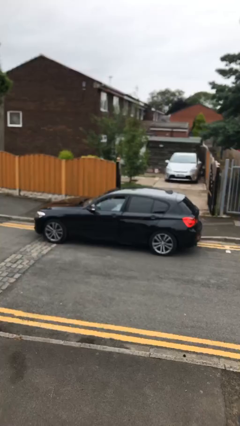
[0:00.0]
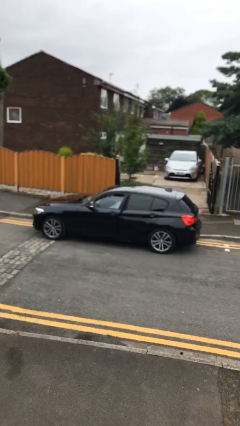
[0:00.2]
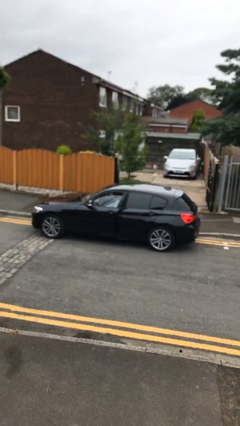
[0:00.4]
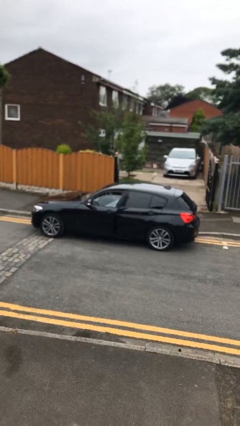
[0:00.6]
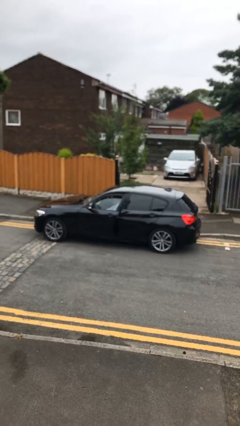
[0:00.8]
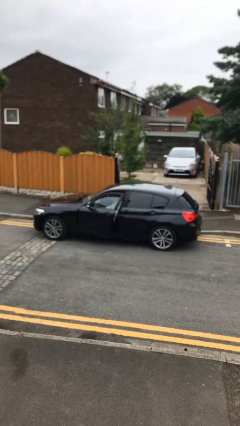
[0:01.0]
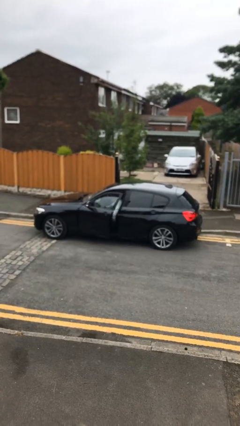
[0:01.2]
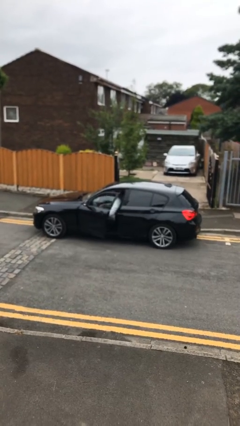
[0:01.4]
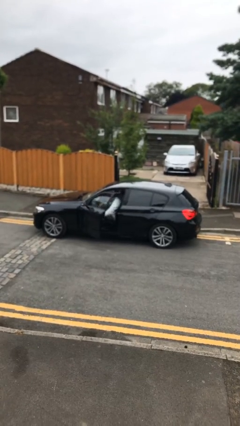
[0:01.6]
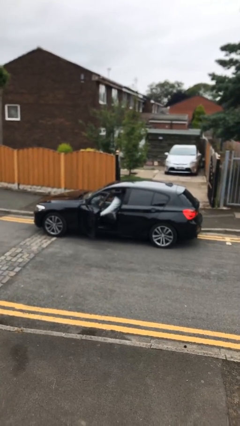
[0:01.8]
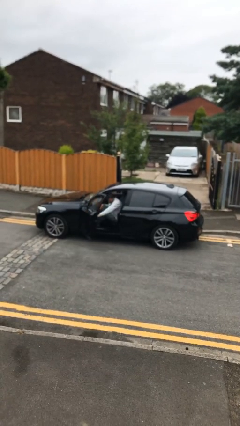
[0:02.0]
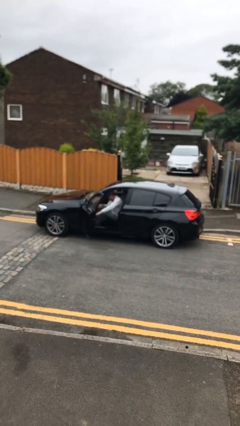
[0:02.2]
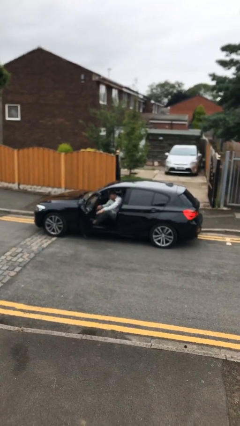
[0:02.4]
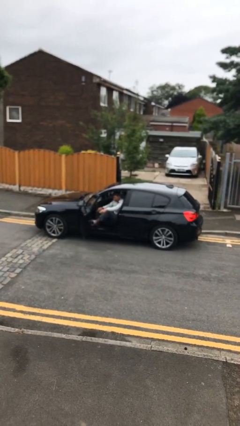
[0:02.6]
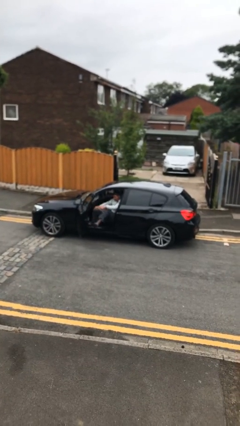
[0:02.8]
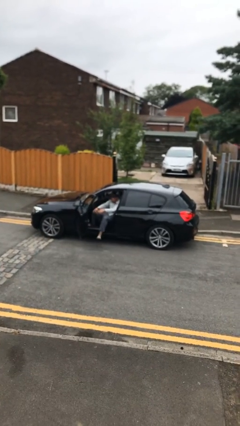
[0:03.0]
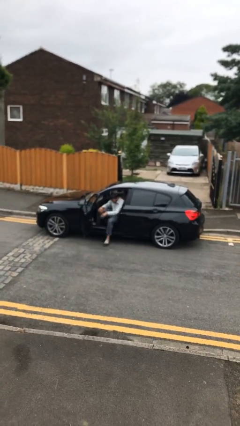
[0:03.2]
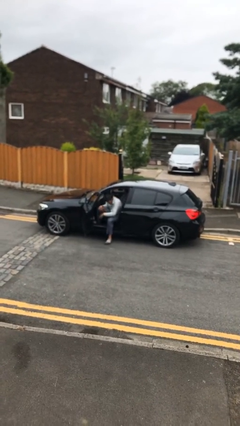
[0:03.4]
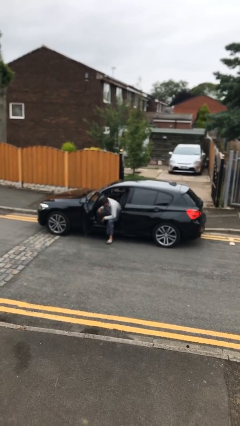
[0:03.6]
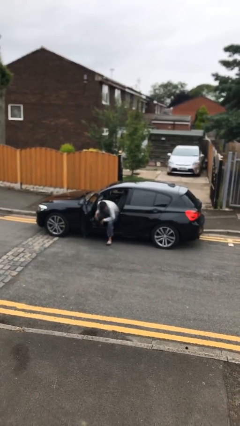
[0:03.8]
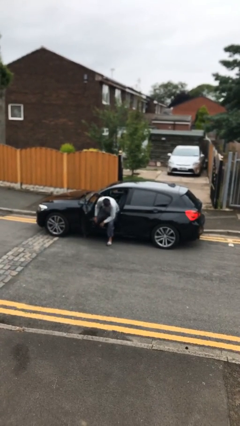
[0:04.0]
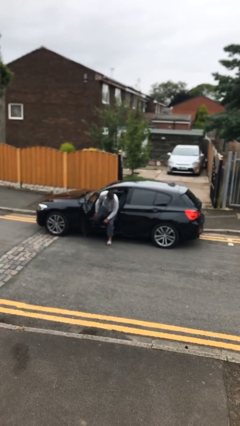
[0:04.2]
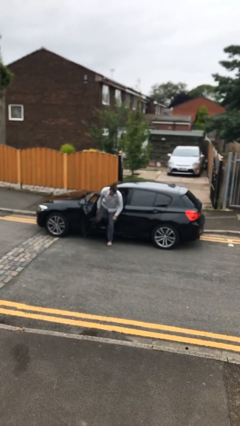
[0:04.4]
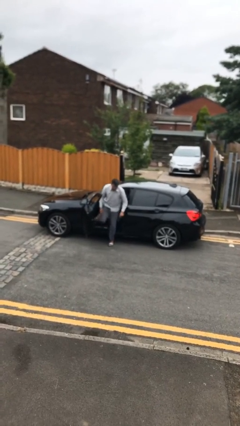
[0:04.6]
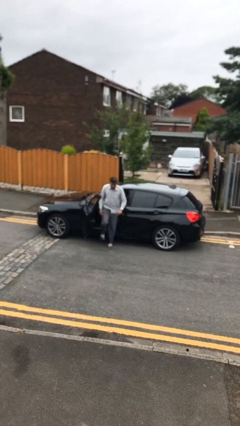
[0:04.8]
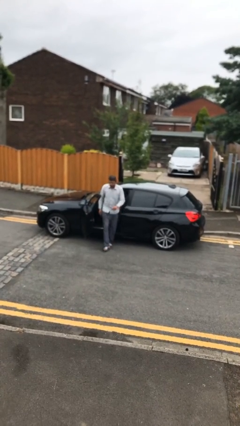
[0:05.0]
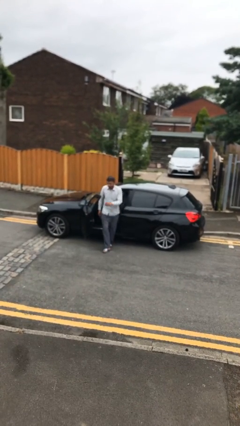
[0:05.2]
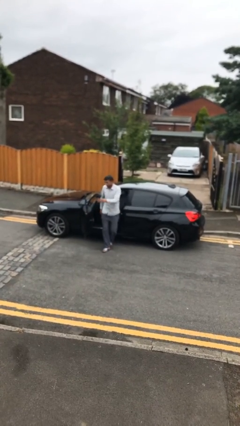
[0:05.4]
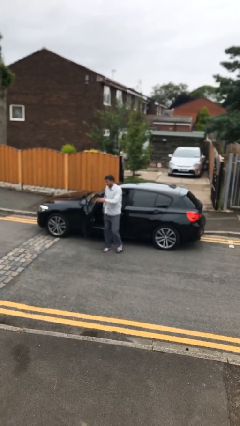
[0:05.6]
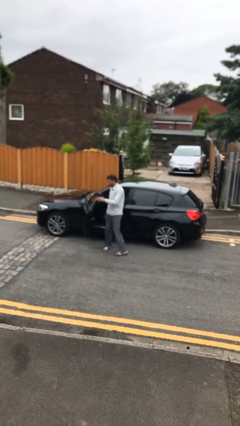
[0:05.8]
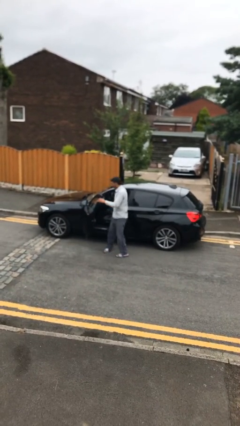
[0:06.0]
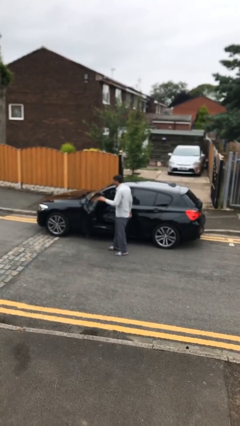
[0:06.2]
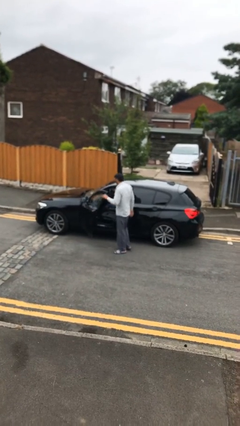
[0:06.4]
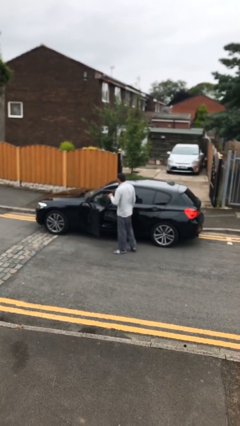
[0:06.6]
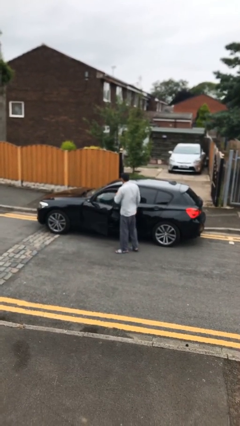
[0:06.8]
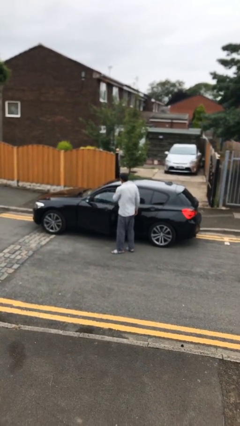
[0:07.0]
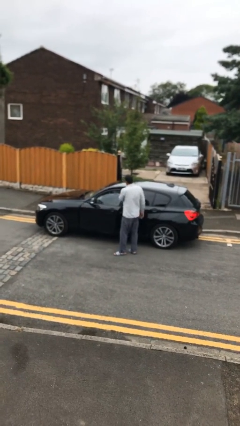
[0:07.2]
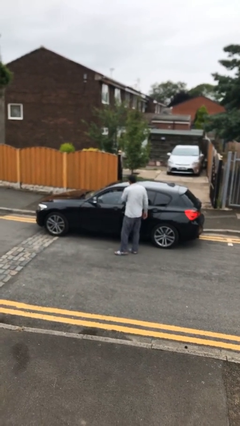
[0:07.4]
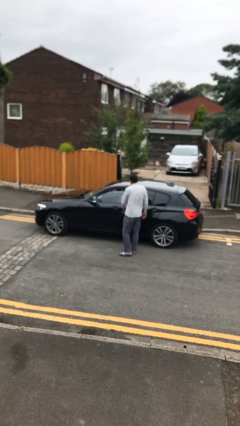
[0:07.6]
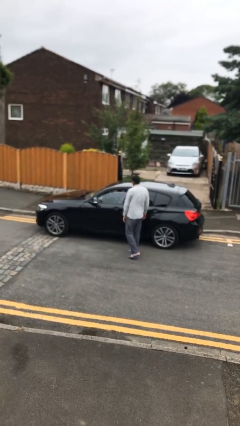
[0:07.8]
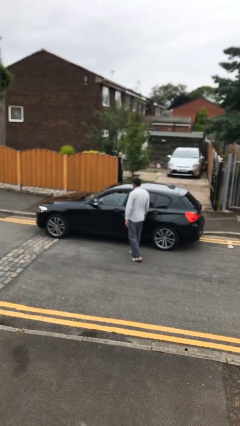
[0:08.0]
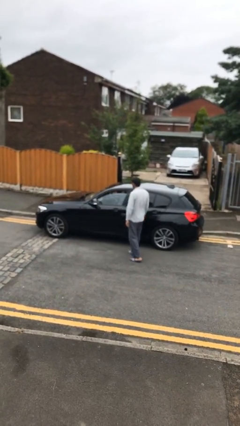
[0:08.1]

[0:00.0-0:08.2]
car drops off person

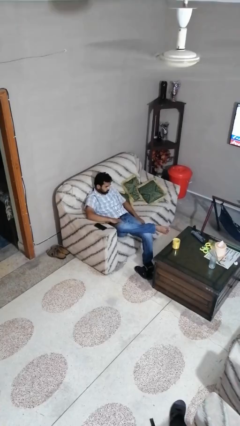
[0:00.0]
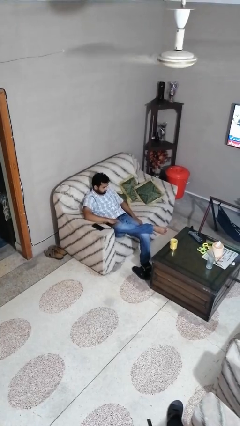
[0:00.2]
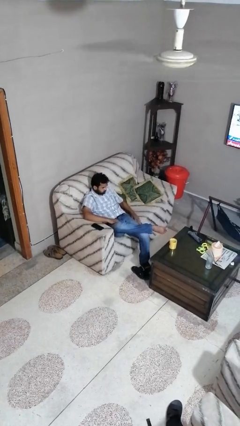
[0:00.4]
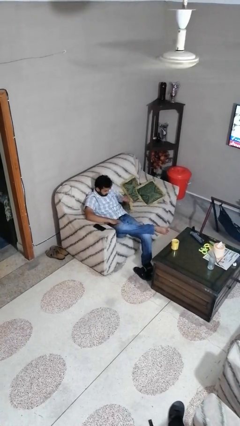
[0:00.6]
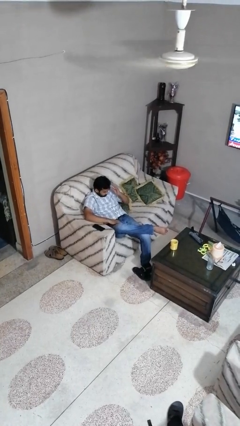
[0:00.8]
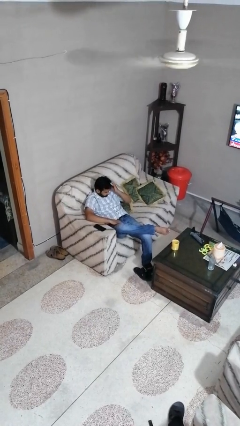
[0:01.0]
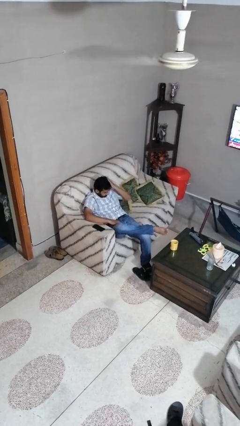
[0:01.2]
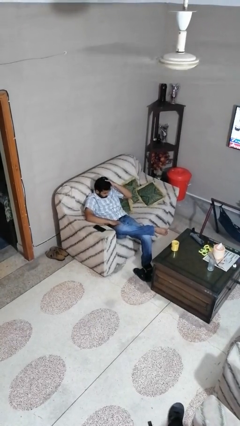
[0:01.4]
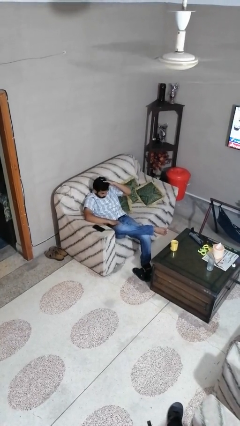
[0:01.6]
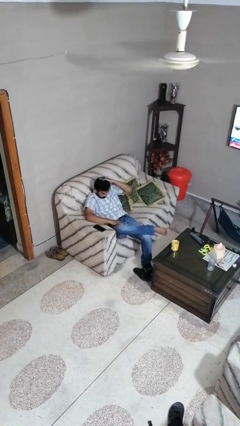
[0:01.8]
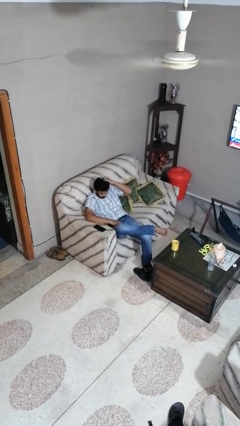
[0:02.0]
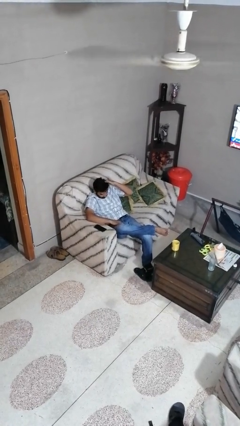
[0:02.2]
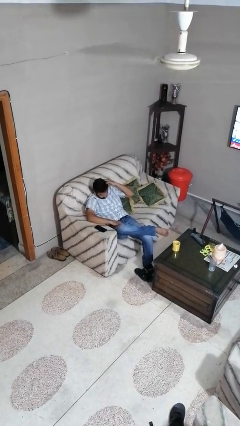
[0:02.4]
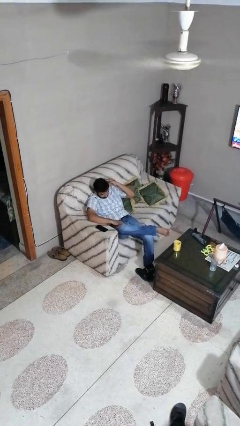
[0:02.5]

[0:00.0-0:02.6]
person strokes hair

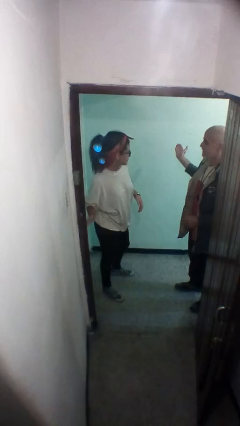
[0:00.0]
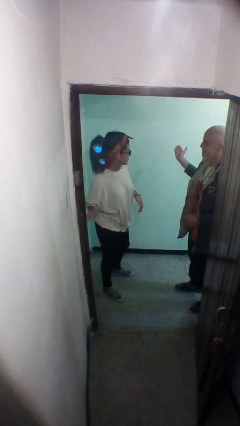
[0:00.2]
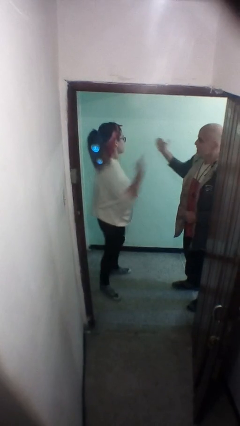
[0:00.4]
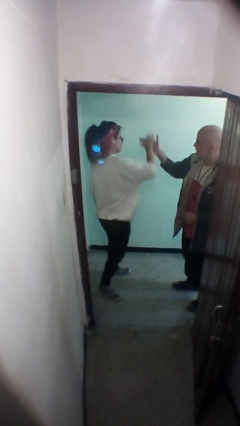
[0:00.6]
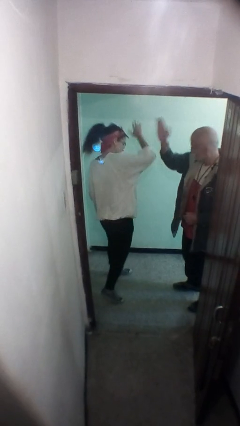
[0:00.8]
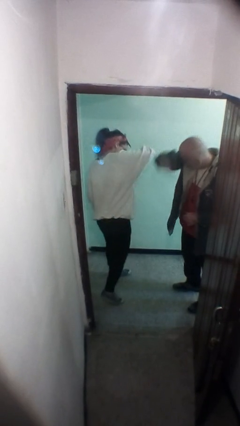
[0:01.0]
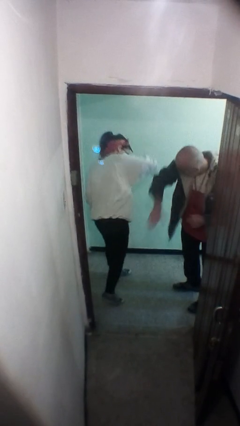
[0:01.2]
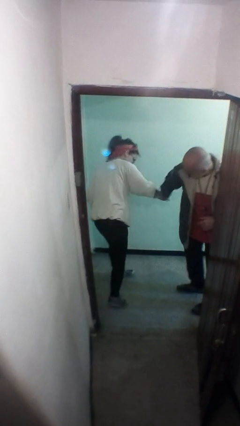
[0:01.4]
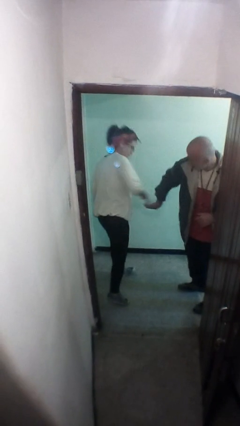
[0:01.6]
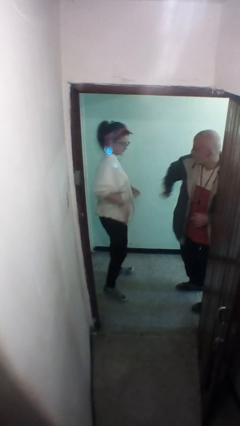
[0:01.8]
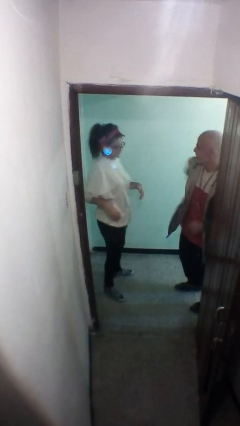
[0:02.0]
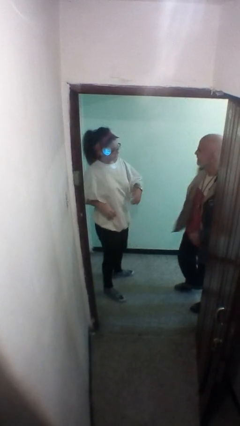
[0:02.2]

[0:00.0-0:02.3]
person highfives hand

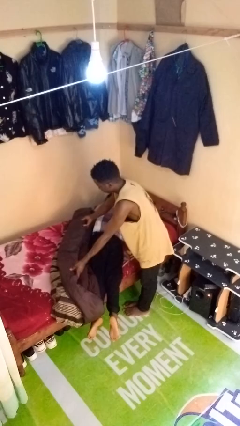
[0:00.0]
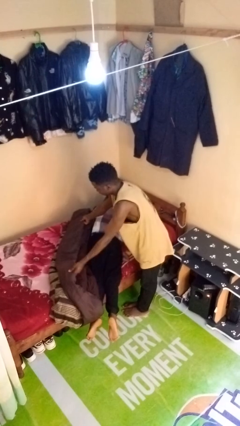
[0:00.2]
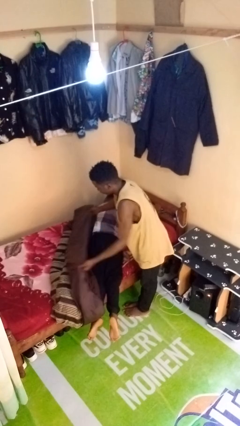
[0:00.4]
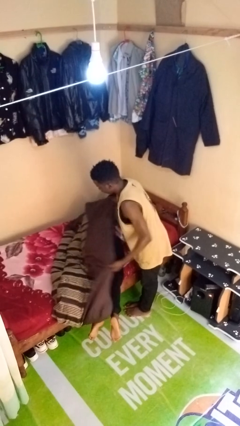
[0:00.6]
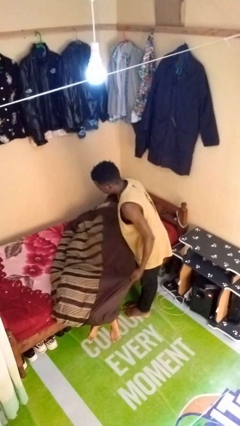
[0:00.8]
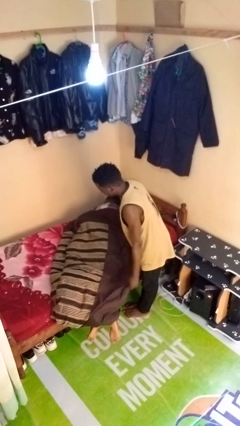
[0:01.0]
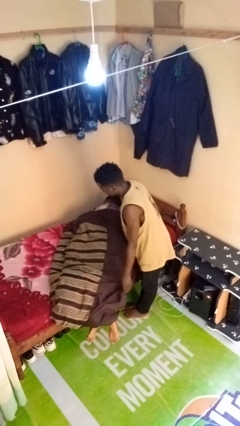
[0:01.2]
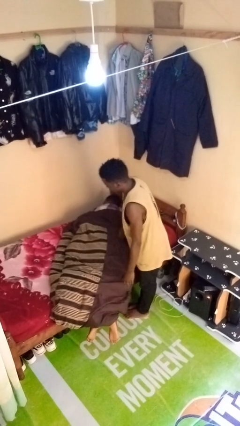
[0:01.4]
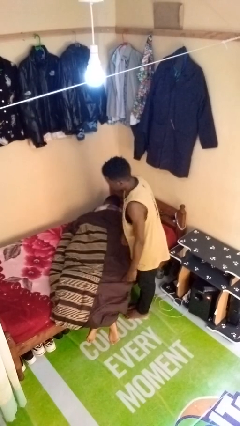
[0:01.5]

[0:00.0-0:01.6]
person covers friend with blanket

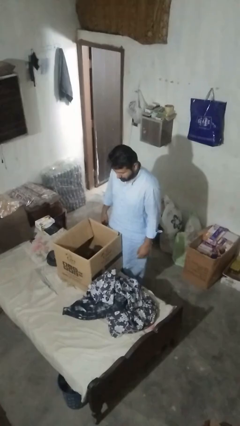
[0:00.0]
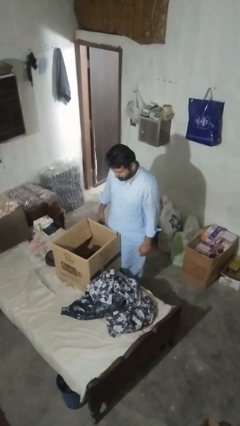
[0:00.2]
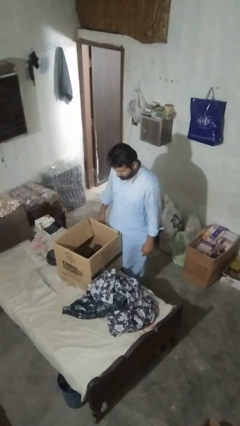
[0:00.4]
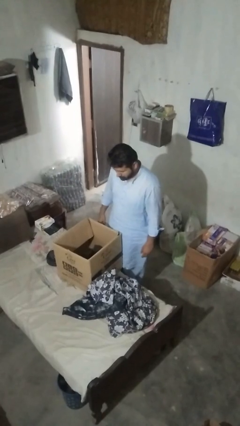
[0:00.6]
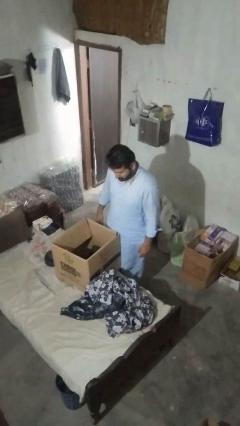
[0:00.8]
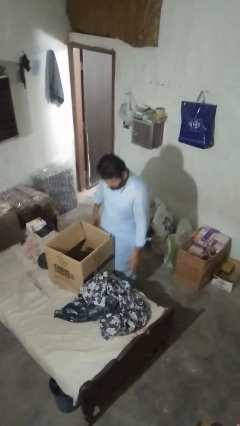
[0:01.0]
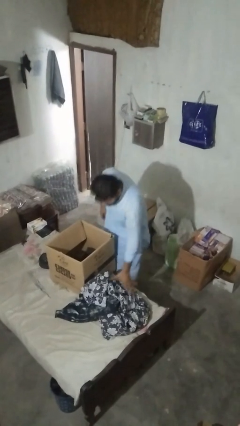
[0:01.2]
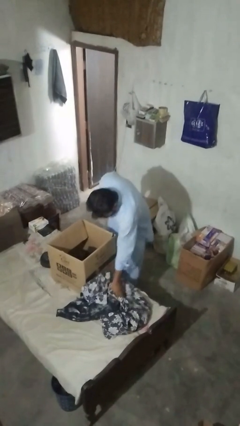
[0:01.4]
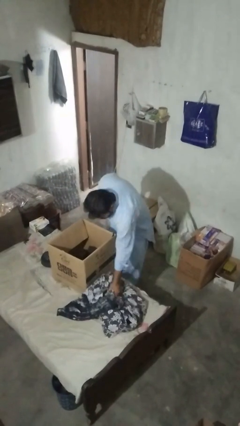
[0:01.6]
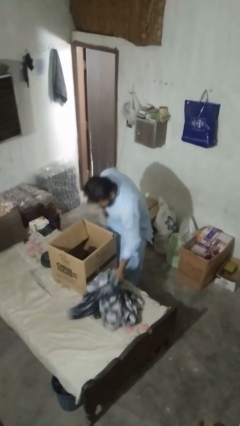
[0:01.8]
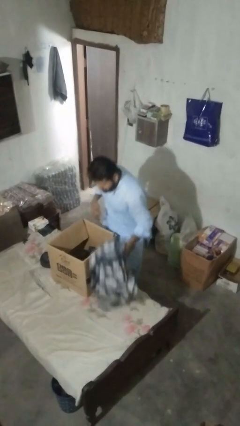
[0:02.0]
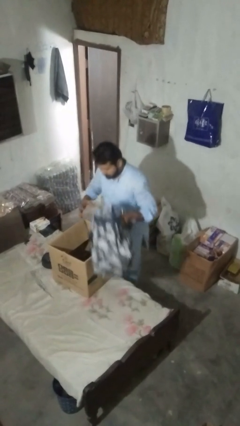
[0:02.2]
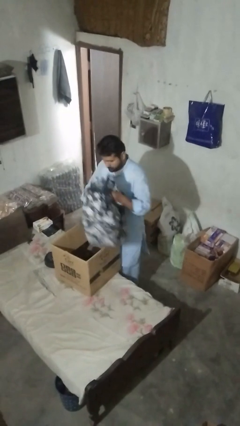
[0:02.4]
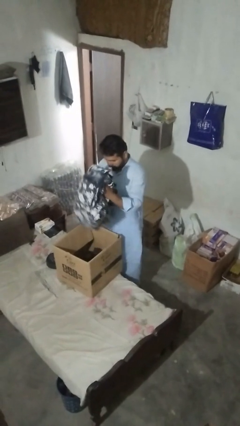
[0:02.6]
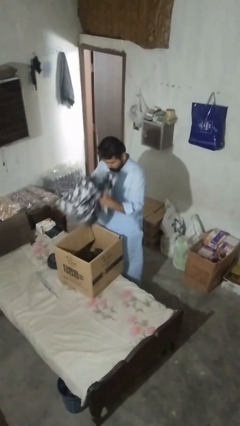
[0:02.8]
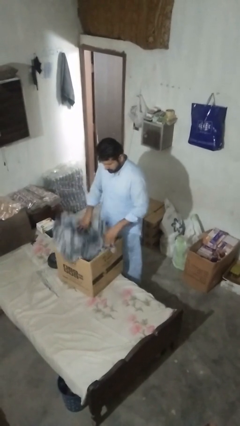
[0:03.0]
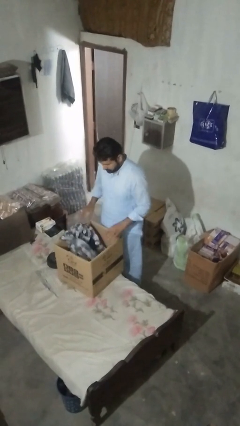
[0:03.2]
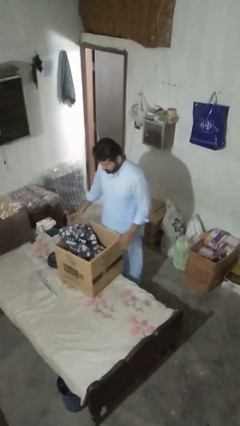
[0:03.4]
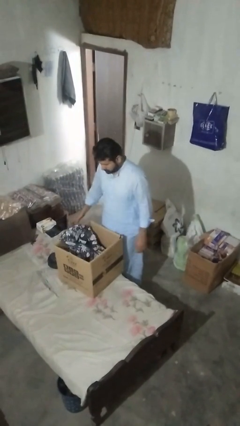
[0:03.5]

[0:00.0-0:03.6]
person loads clotheswasher
